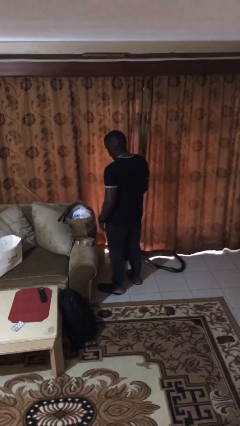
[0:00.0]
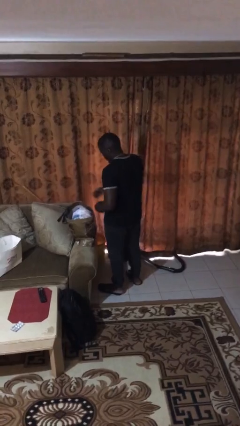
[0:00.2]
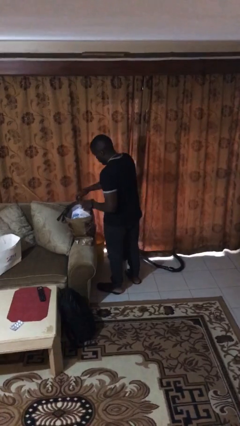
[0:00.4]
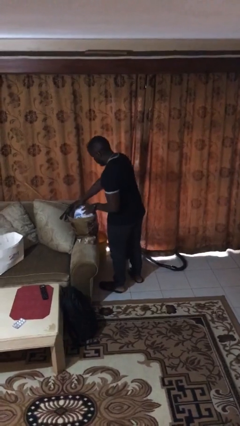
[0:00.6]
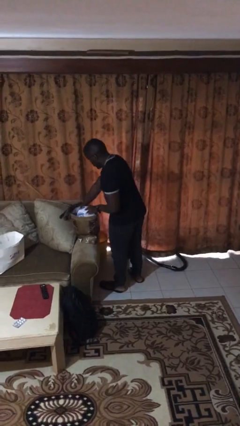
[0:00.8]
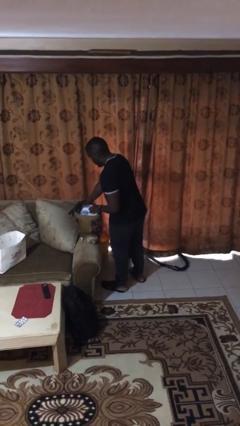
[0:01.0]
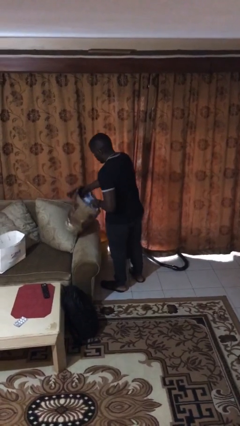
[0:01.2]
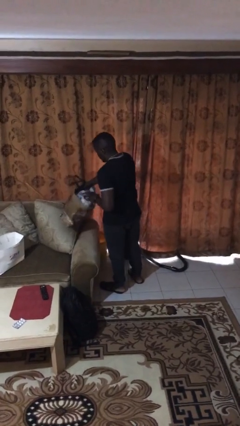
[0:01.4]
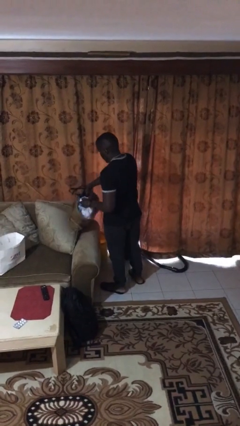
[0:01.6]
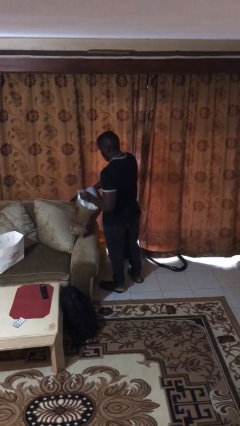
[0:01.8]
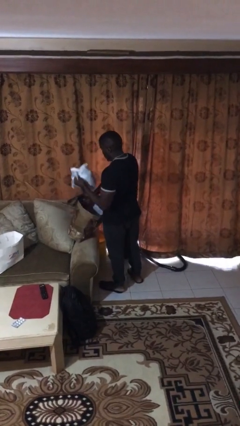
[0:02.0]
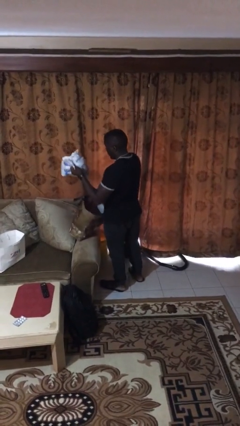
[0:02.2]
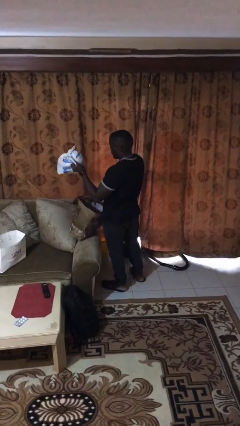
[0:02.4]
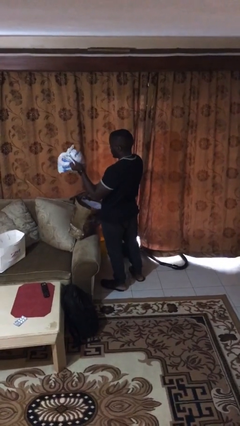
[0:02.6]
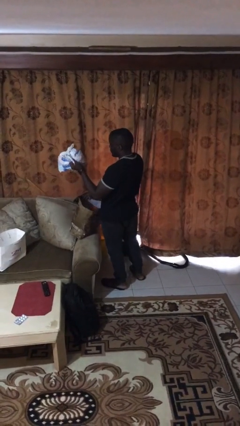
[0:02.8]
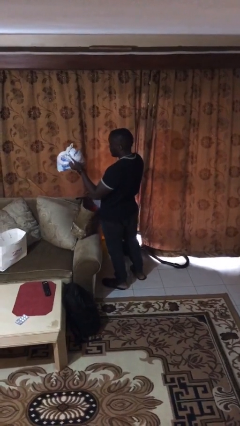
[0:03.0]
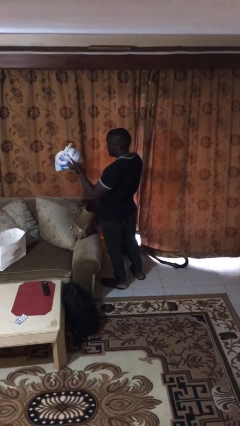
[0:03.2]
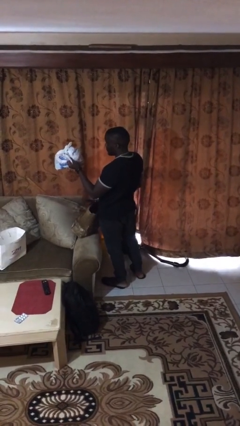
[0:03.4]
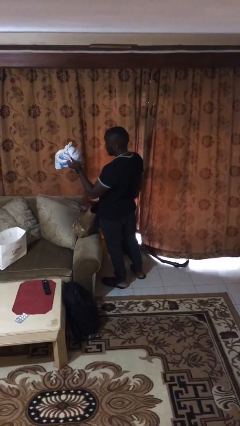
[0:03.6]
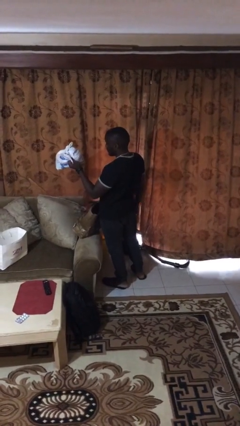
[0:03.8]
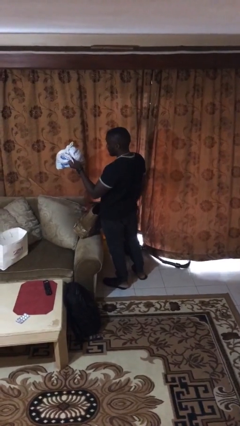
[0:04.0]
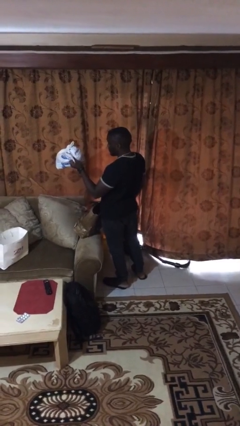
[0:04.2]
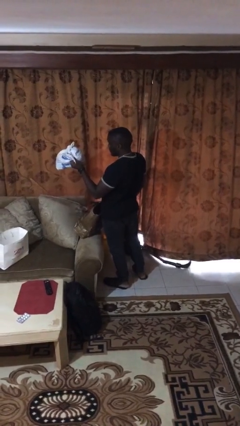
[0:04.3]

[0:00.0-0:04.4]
person takes object from bag

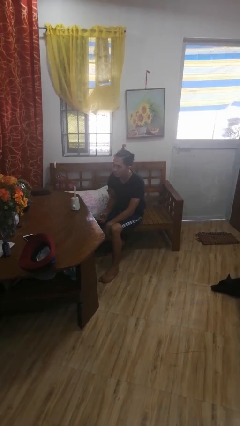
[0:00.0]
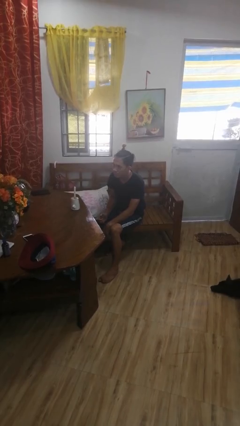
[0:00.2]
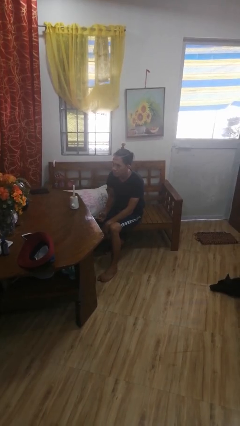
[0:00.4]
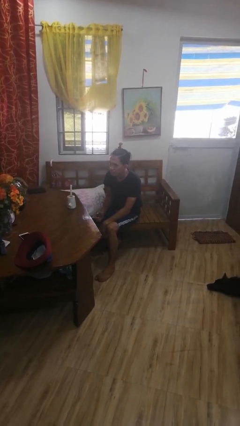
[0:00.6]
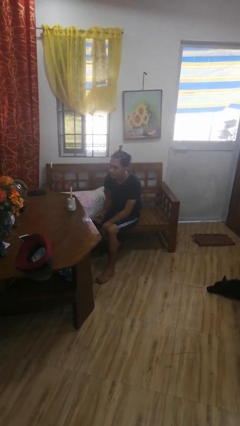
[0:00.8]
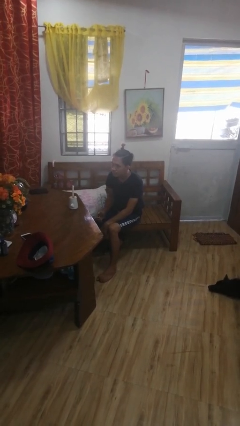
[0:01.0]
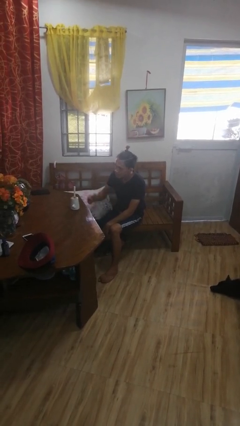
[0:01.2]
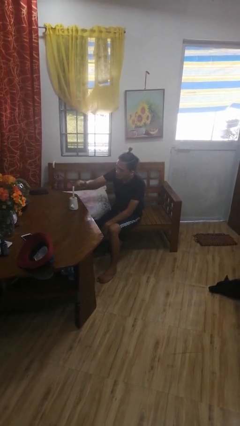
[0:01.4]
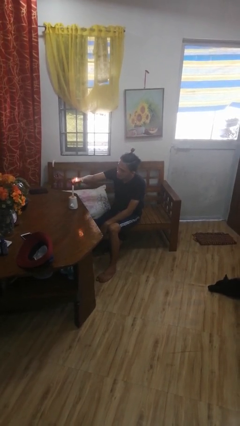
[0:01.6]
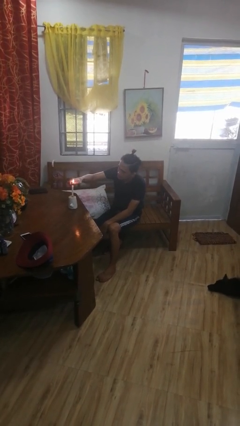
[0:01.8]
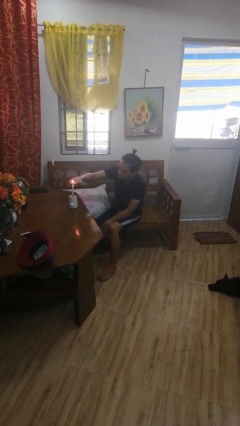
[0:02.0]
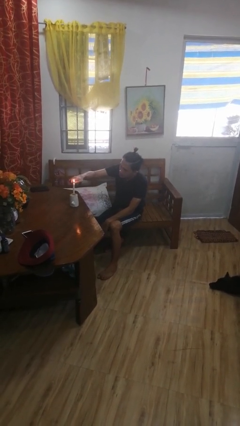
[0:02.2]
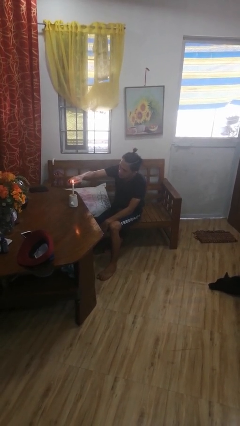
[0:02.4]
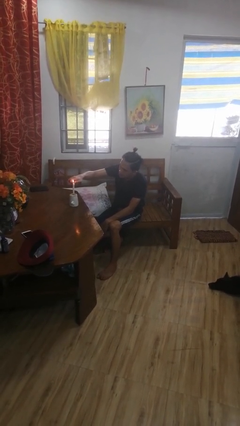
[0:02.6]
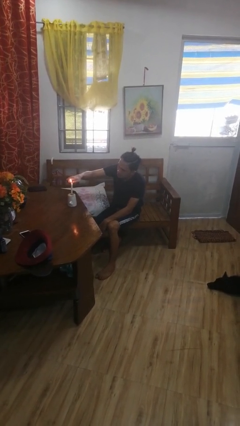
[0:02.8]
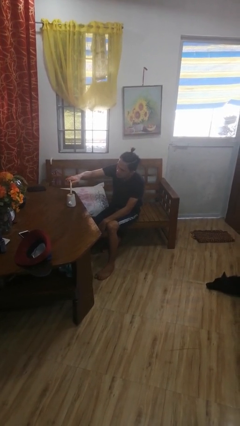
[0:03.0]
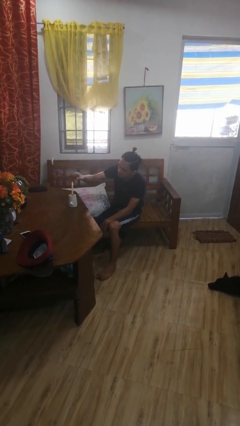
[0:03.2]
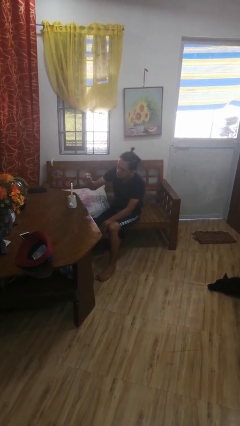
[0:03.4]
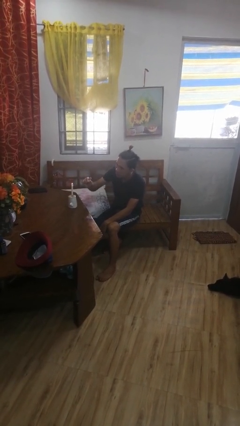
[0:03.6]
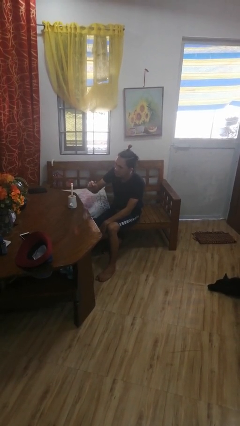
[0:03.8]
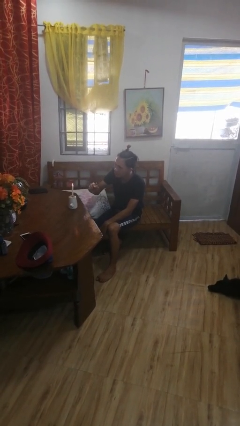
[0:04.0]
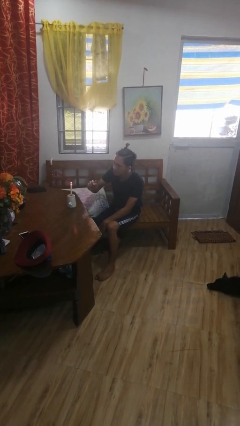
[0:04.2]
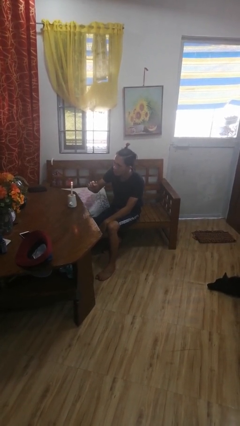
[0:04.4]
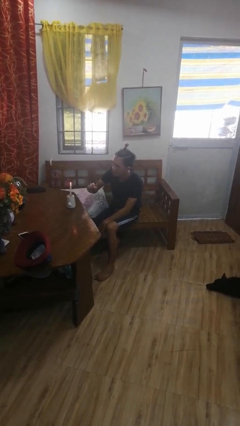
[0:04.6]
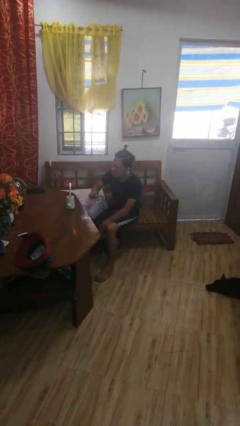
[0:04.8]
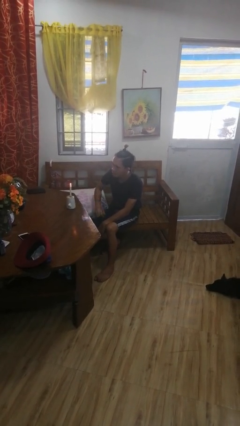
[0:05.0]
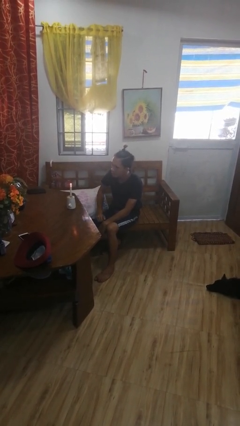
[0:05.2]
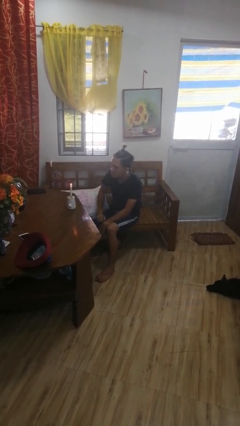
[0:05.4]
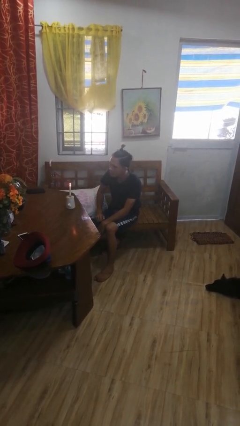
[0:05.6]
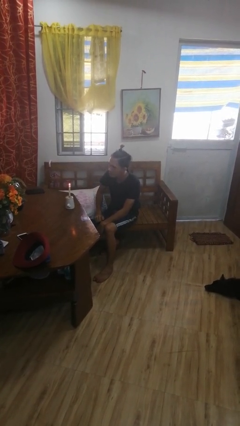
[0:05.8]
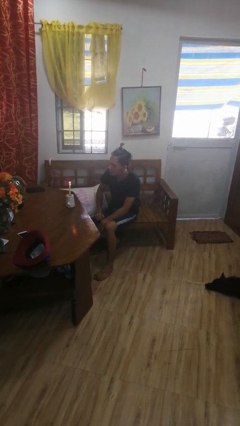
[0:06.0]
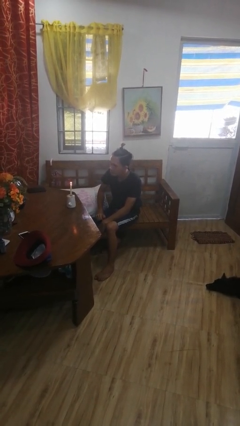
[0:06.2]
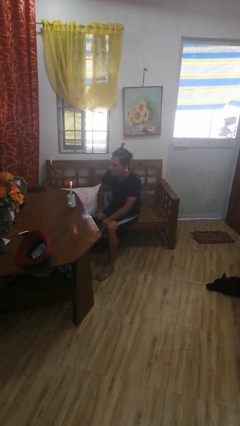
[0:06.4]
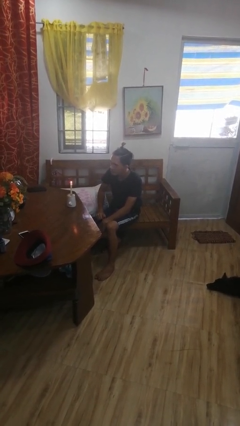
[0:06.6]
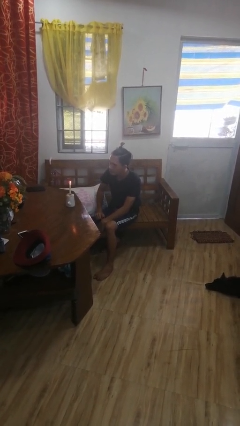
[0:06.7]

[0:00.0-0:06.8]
person lights candle

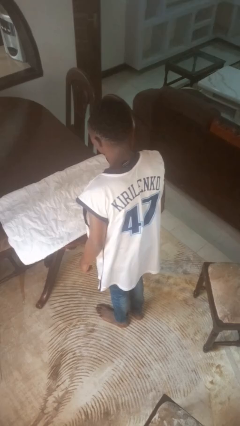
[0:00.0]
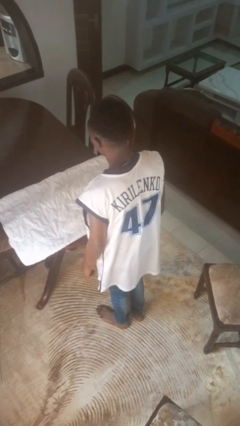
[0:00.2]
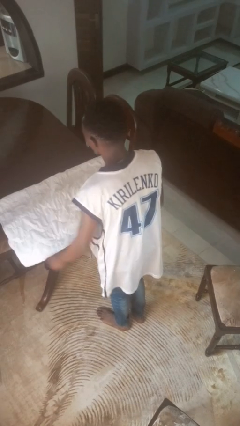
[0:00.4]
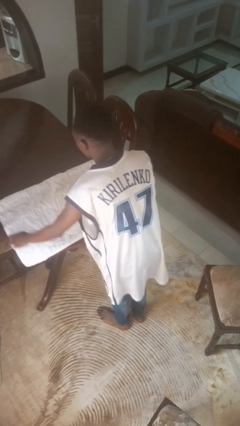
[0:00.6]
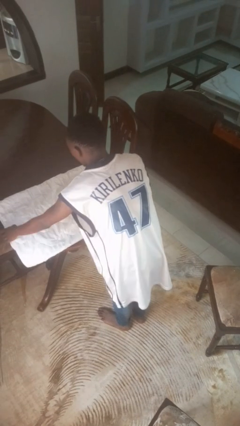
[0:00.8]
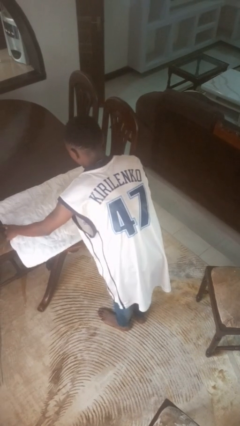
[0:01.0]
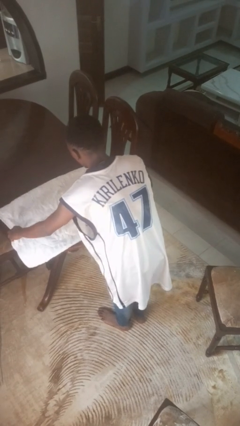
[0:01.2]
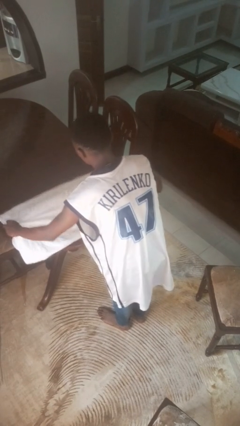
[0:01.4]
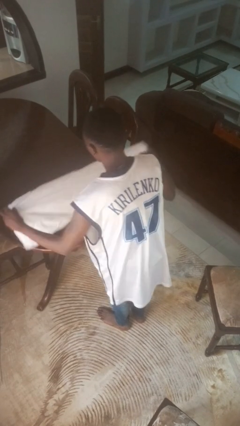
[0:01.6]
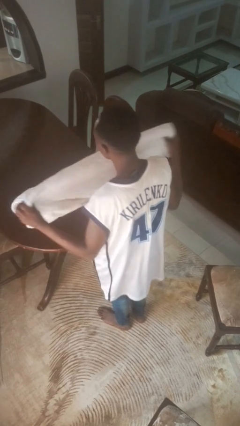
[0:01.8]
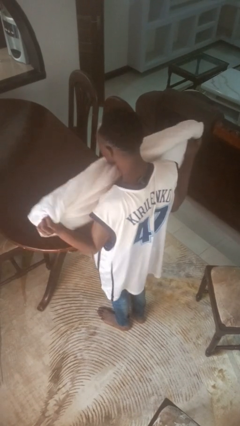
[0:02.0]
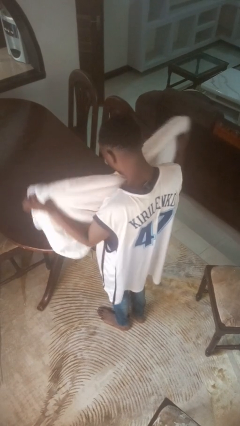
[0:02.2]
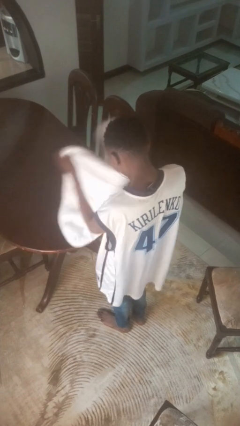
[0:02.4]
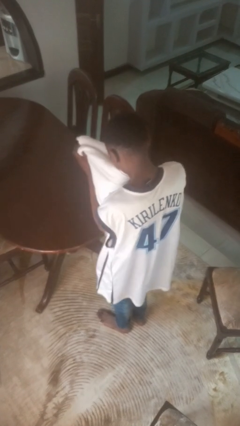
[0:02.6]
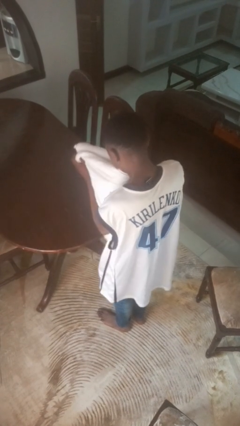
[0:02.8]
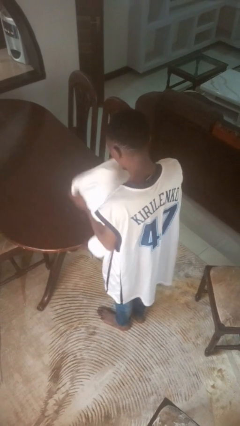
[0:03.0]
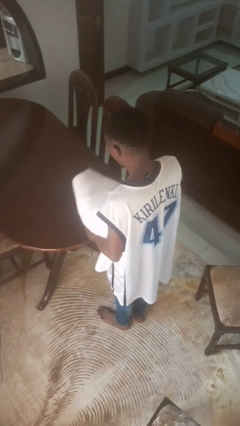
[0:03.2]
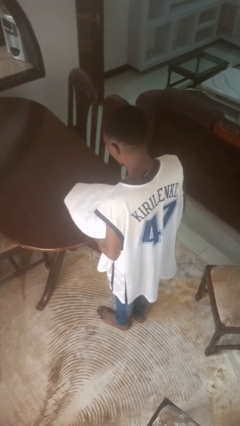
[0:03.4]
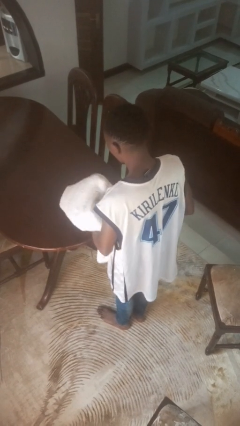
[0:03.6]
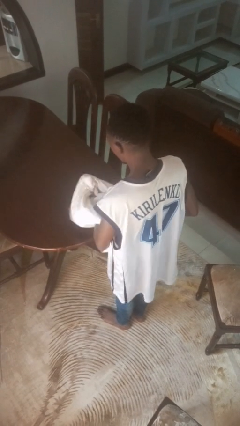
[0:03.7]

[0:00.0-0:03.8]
person folds tablecloth

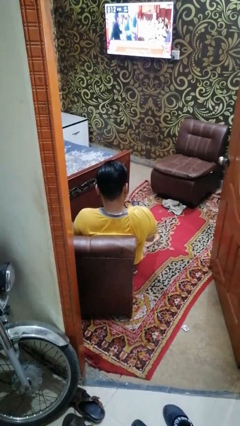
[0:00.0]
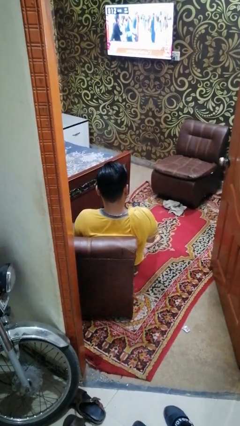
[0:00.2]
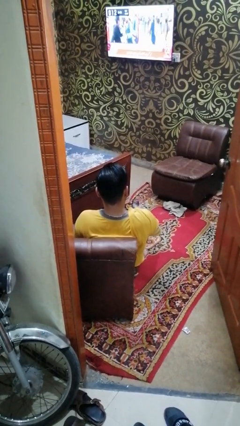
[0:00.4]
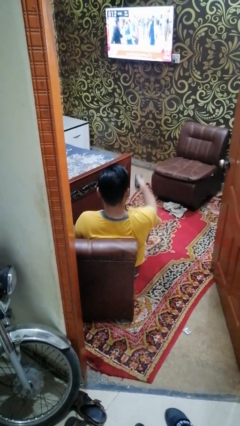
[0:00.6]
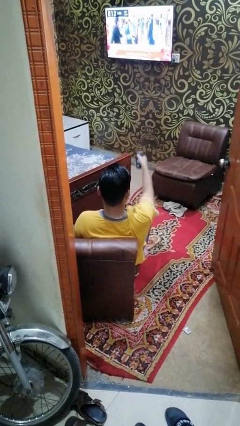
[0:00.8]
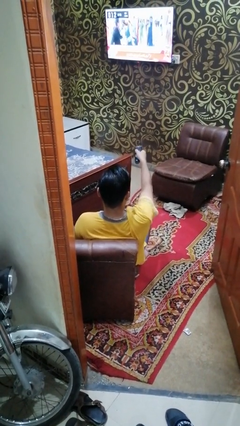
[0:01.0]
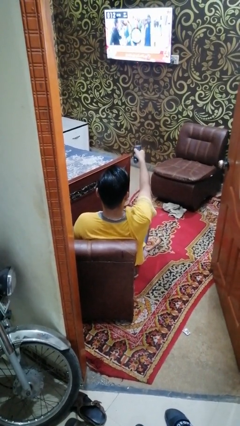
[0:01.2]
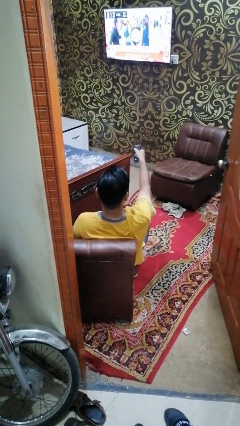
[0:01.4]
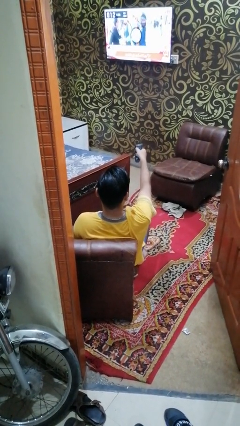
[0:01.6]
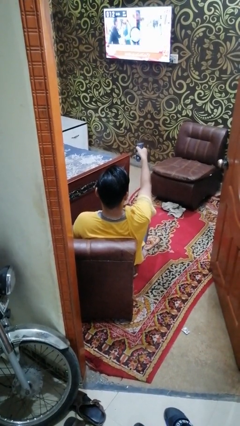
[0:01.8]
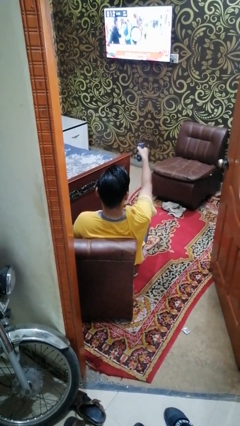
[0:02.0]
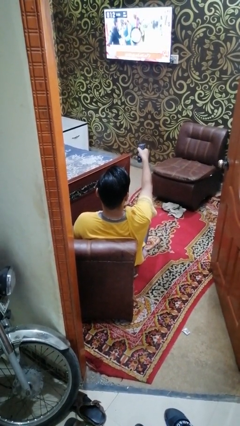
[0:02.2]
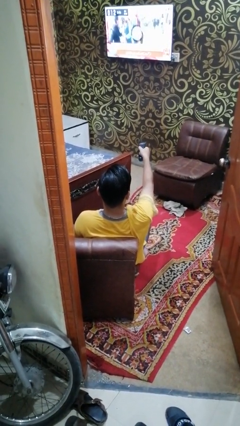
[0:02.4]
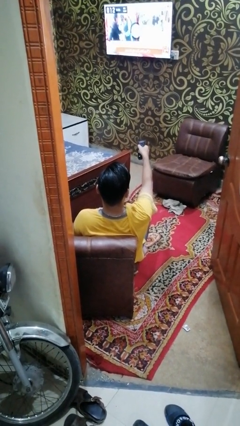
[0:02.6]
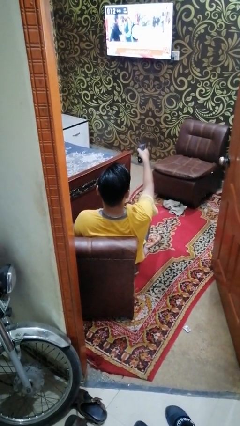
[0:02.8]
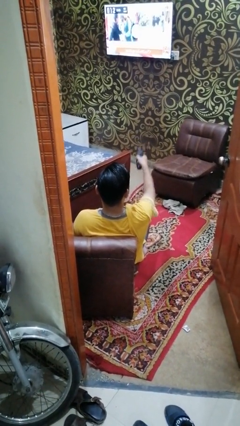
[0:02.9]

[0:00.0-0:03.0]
person uses television remote
